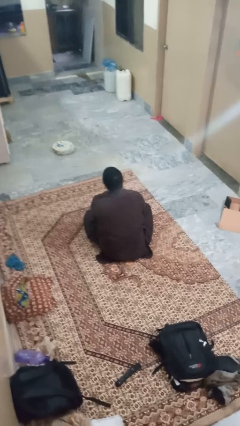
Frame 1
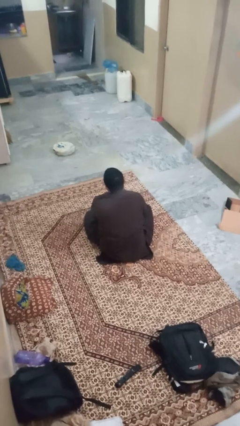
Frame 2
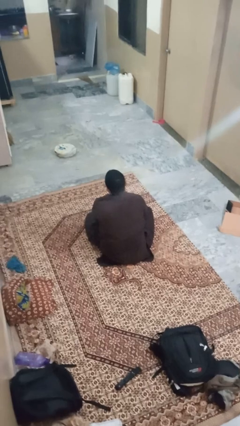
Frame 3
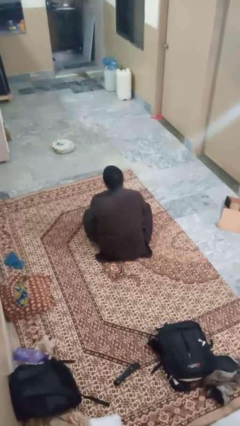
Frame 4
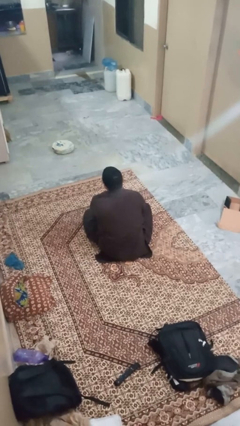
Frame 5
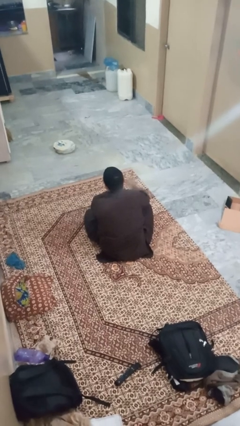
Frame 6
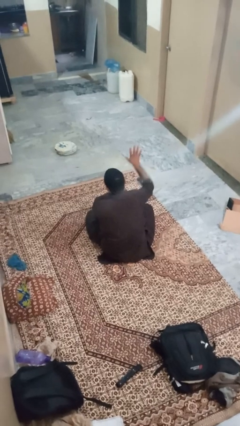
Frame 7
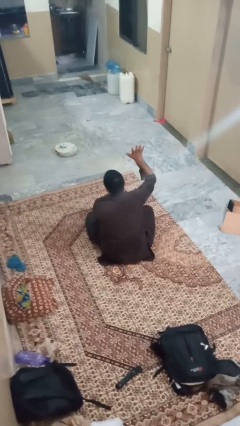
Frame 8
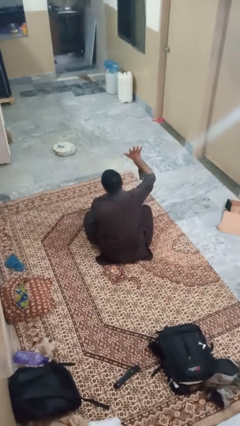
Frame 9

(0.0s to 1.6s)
person gestures number five

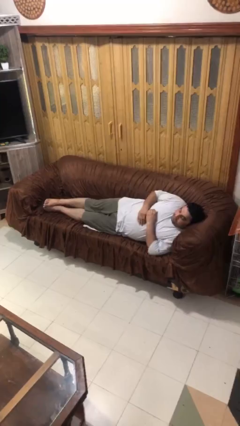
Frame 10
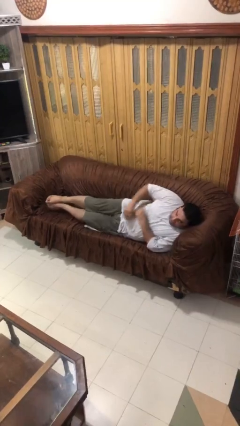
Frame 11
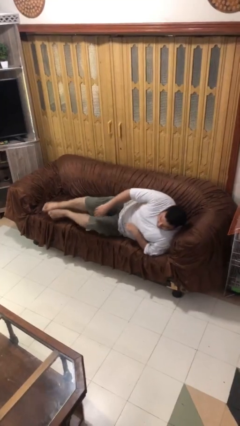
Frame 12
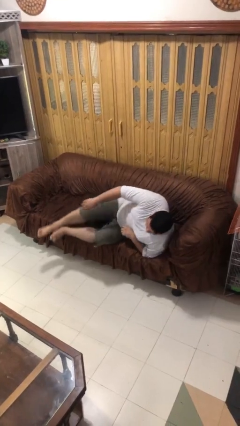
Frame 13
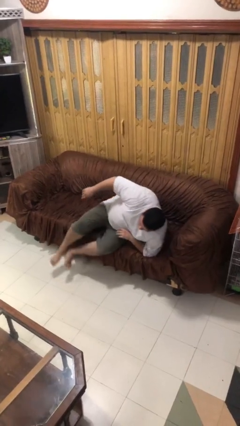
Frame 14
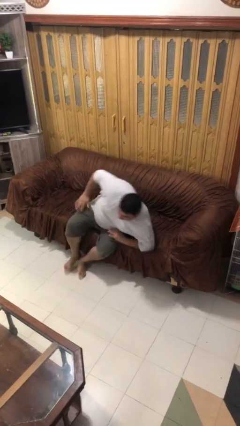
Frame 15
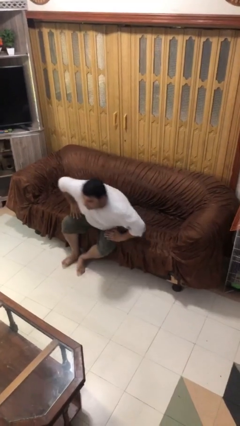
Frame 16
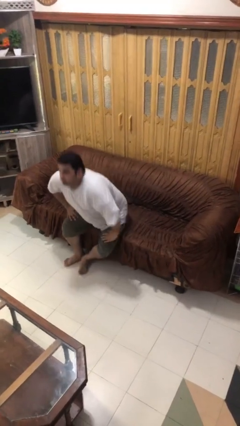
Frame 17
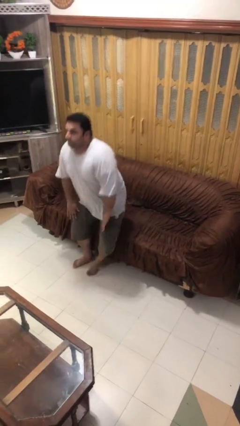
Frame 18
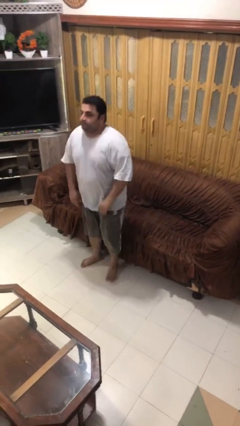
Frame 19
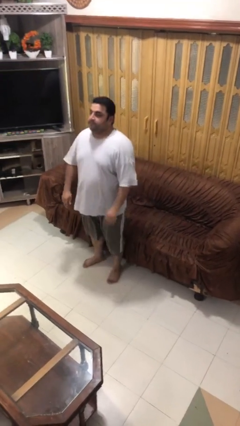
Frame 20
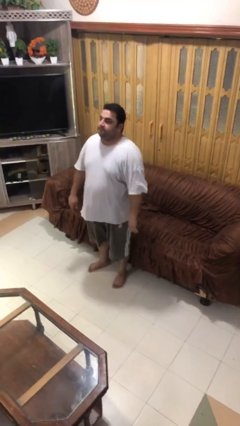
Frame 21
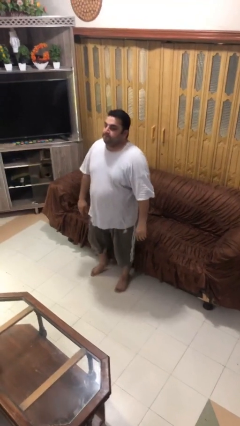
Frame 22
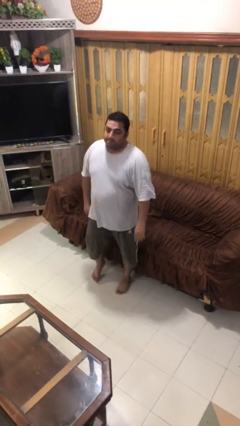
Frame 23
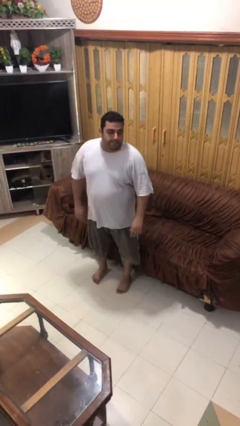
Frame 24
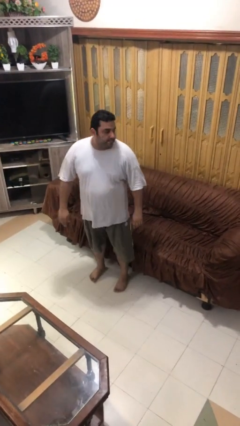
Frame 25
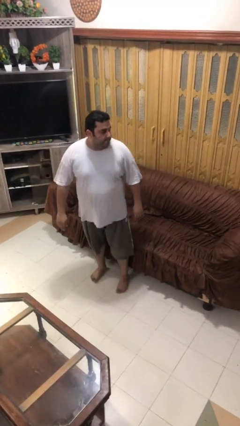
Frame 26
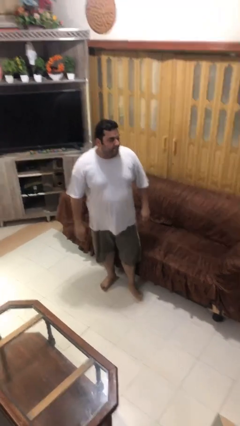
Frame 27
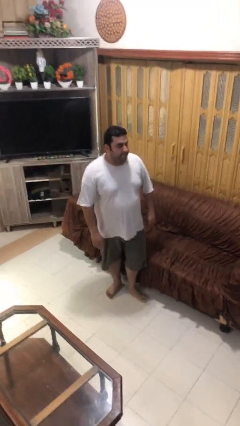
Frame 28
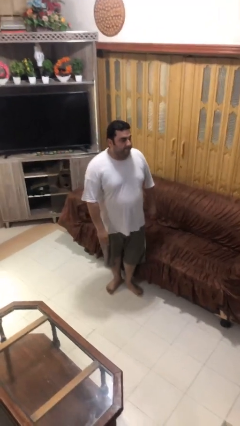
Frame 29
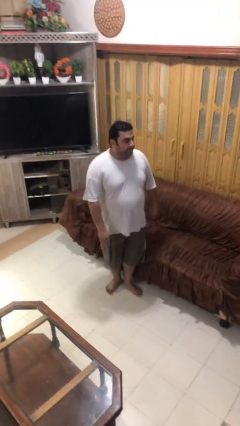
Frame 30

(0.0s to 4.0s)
person stands up

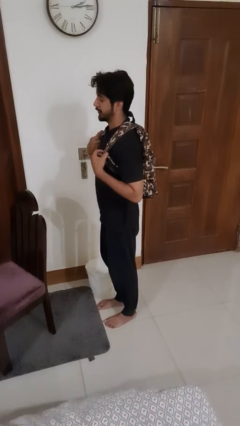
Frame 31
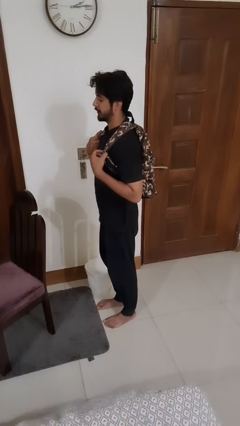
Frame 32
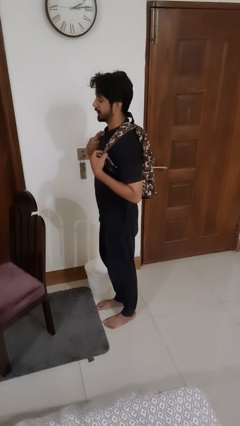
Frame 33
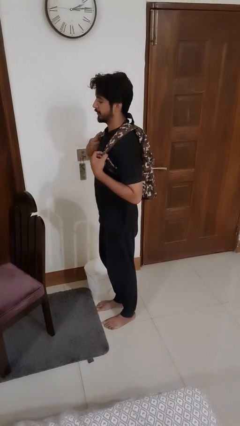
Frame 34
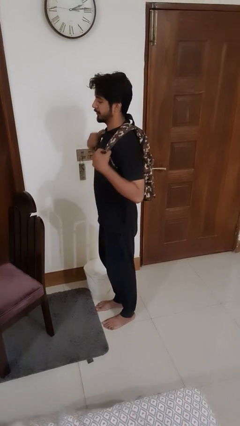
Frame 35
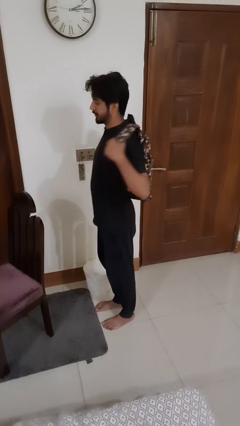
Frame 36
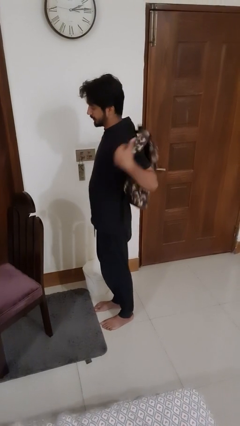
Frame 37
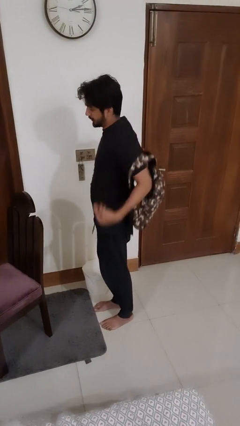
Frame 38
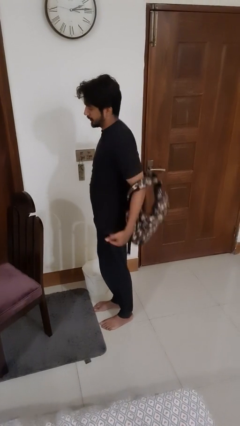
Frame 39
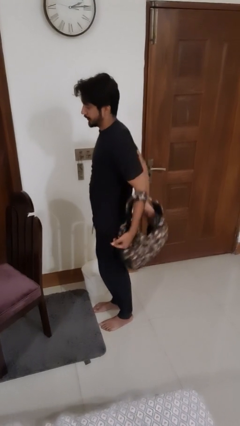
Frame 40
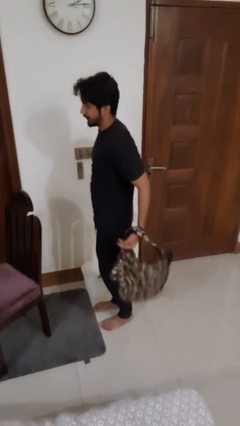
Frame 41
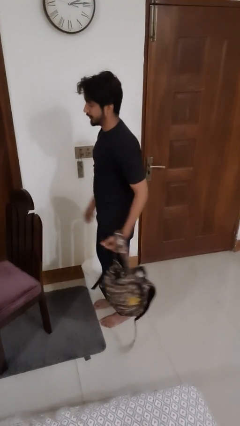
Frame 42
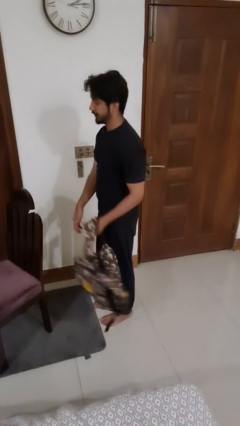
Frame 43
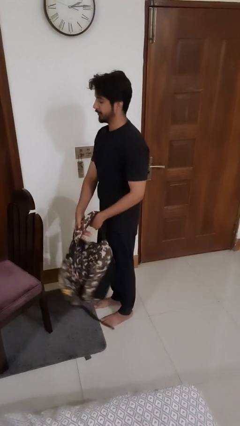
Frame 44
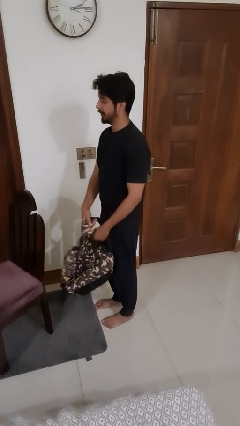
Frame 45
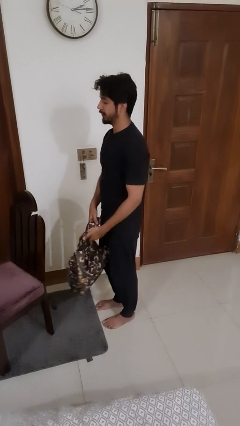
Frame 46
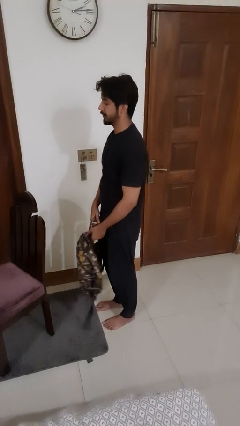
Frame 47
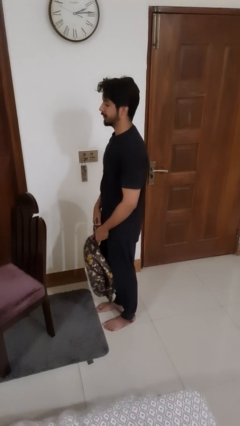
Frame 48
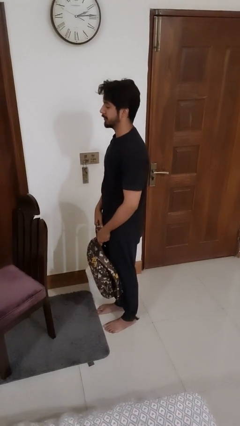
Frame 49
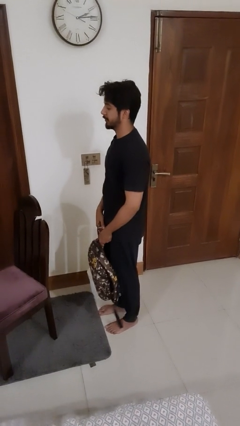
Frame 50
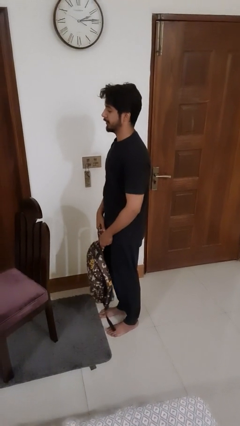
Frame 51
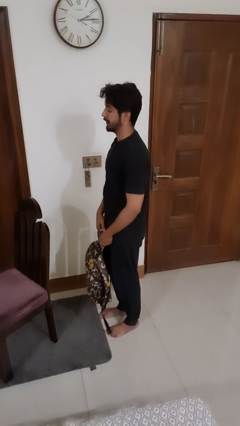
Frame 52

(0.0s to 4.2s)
person takes off backpack

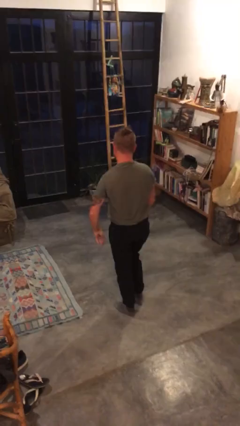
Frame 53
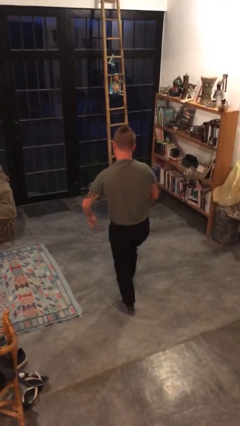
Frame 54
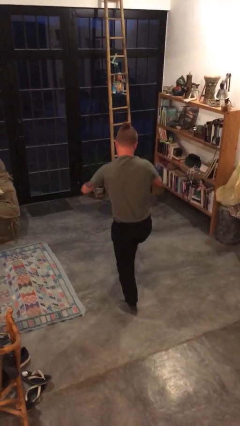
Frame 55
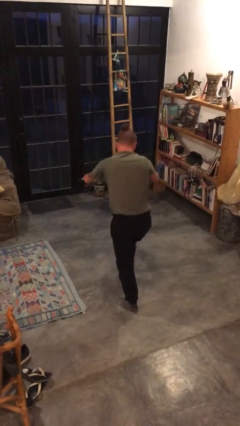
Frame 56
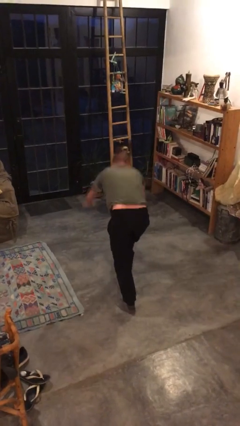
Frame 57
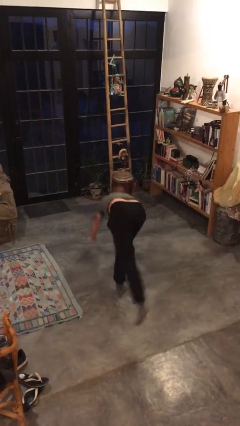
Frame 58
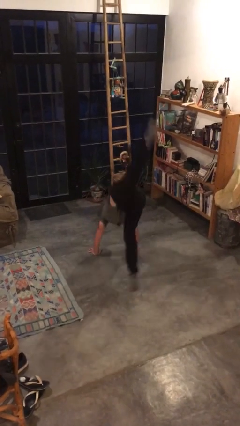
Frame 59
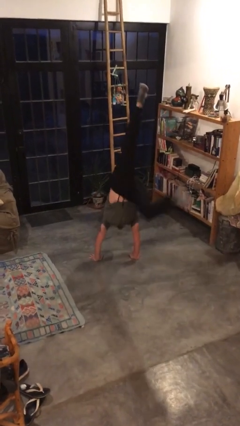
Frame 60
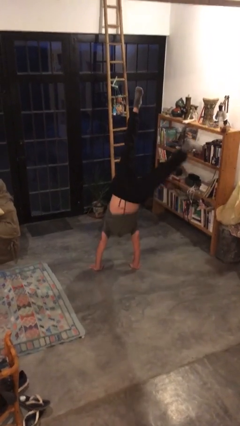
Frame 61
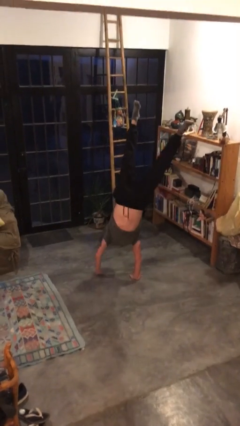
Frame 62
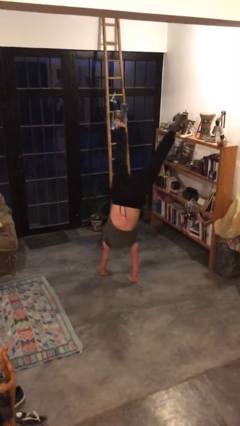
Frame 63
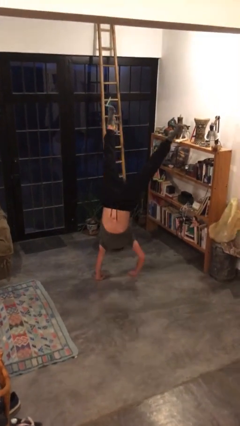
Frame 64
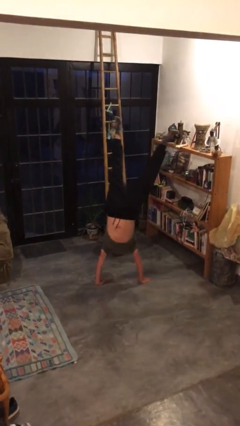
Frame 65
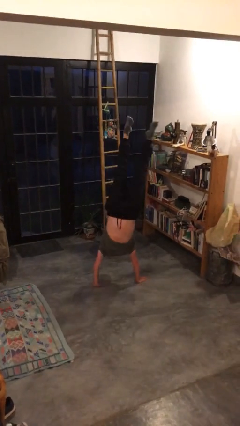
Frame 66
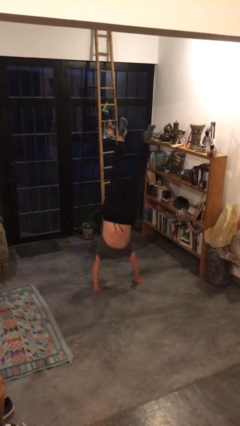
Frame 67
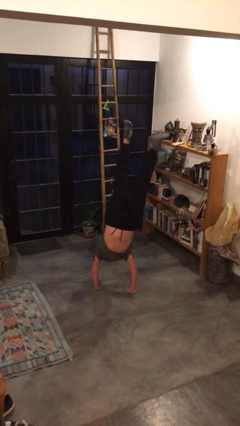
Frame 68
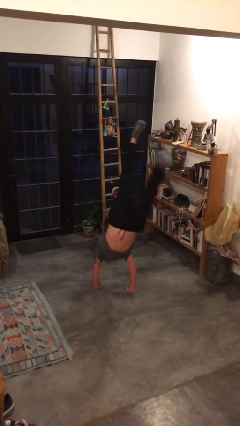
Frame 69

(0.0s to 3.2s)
person handstand

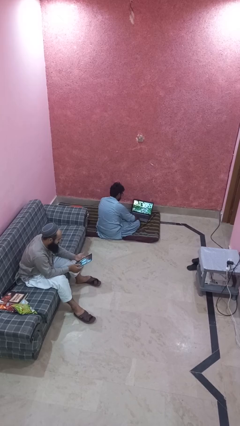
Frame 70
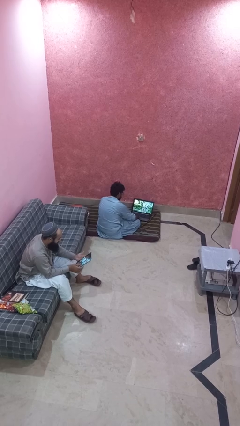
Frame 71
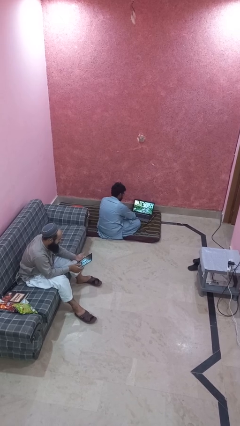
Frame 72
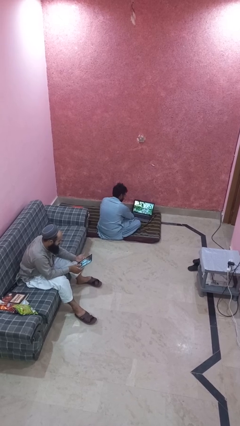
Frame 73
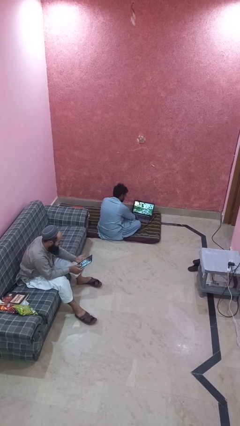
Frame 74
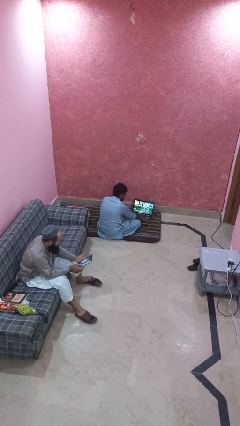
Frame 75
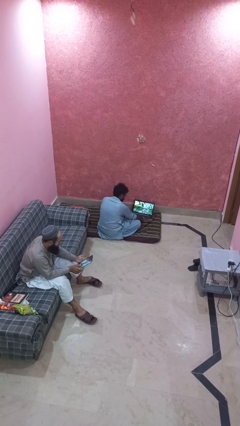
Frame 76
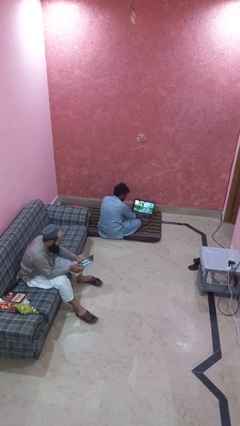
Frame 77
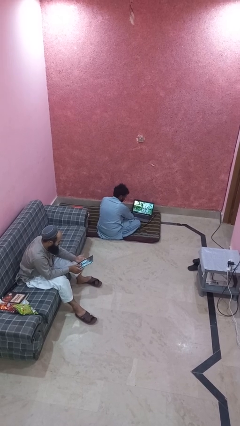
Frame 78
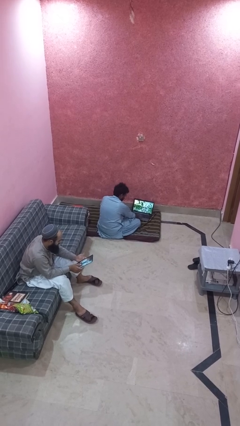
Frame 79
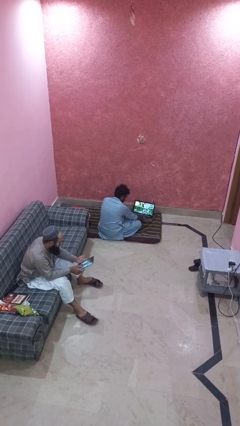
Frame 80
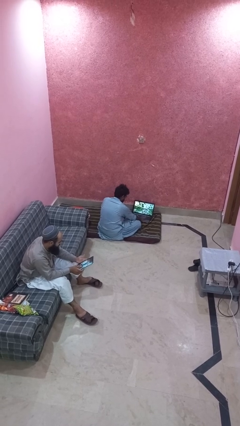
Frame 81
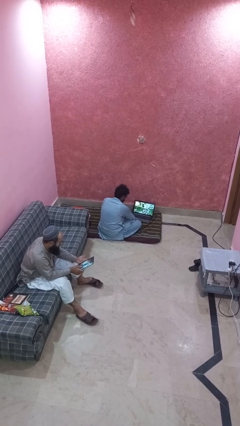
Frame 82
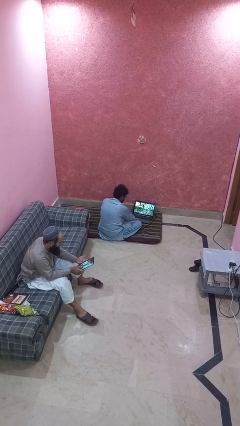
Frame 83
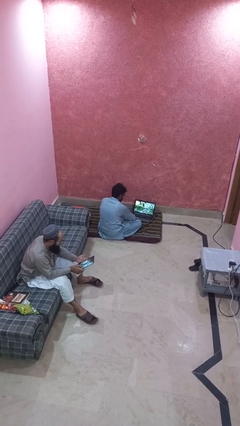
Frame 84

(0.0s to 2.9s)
person waves hand over object

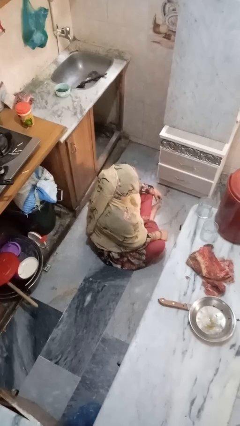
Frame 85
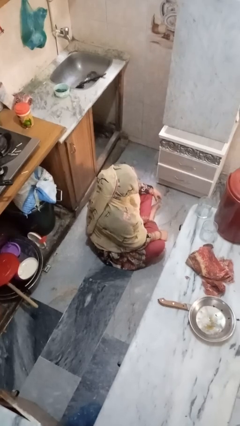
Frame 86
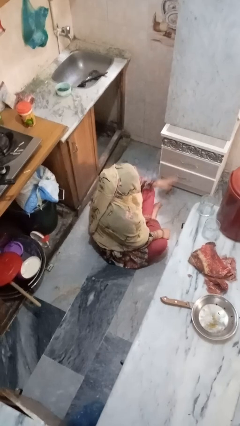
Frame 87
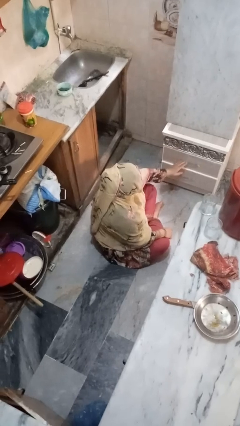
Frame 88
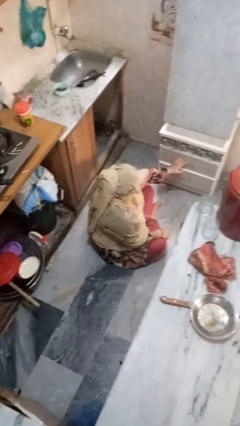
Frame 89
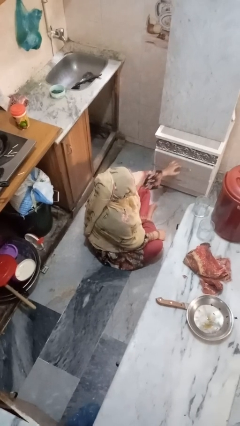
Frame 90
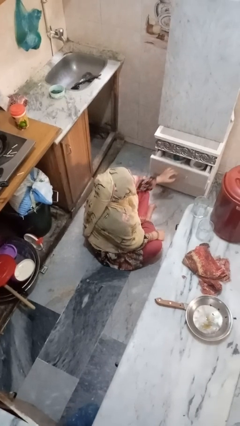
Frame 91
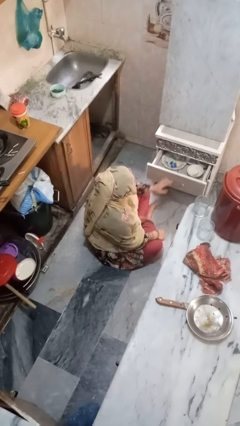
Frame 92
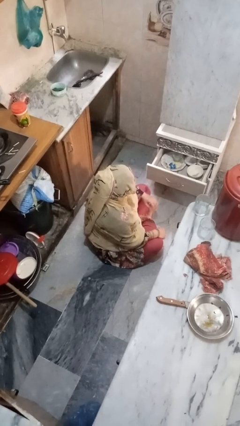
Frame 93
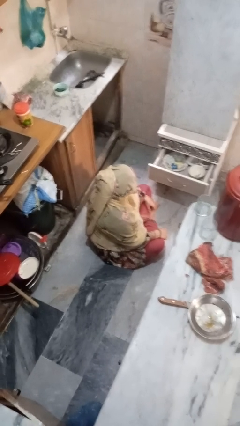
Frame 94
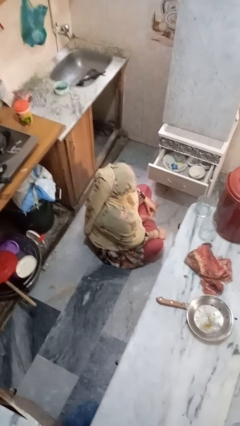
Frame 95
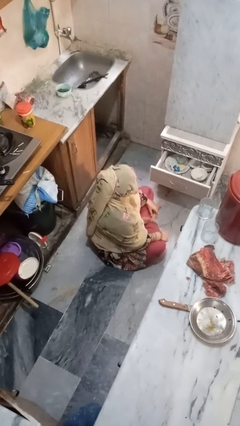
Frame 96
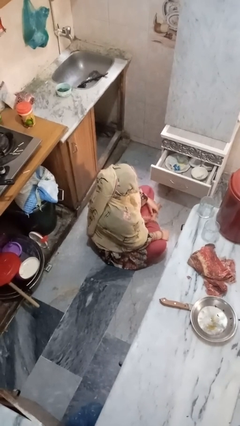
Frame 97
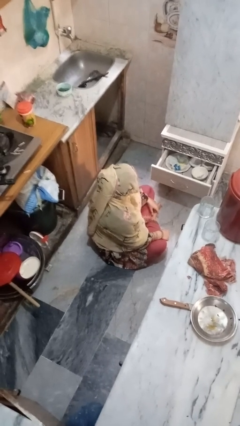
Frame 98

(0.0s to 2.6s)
person opens kitchen drawer
